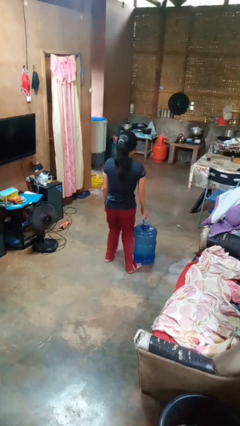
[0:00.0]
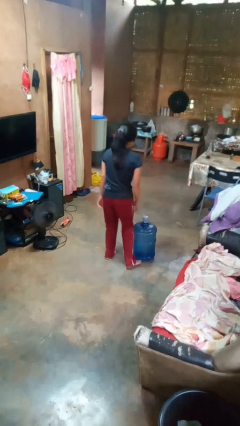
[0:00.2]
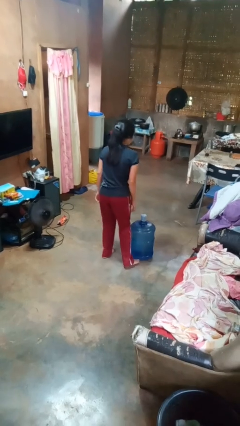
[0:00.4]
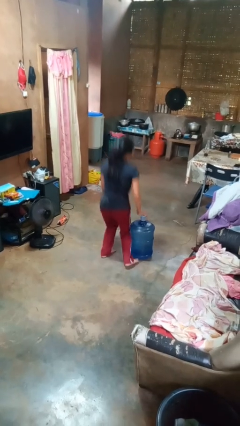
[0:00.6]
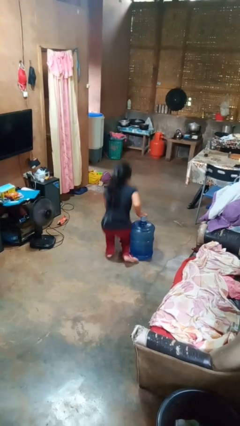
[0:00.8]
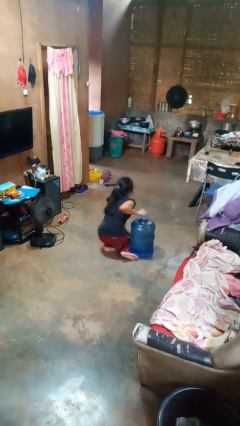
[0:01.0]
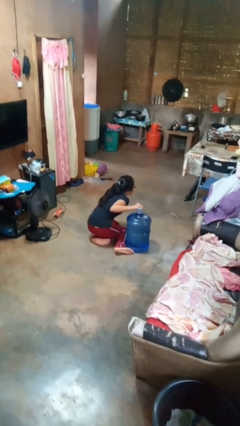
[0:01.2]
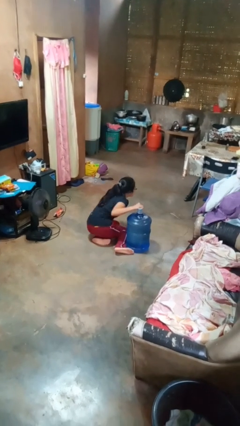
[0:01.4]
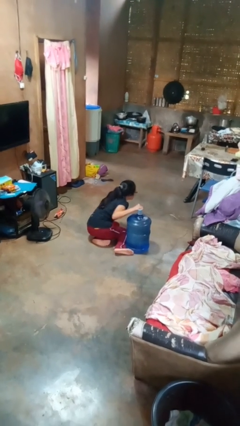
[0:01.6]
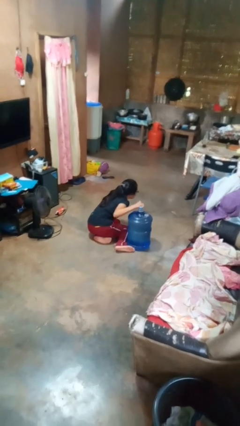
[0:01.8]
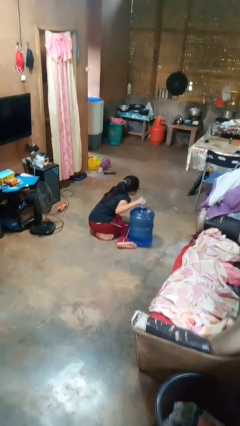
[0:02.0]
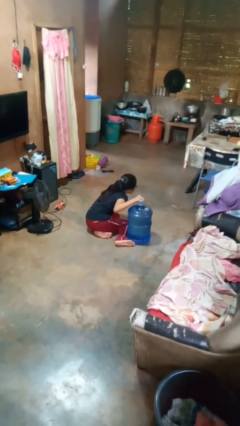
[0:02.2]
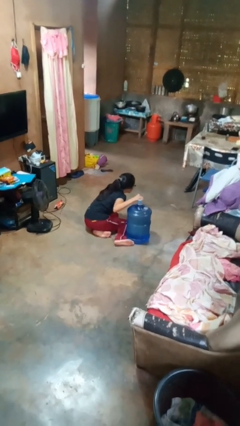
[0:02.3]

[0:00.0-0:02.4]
person trips on object on floor

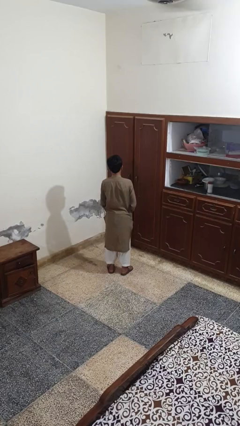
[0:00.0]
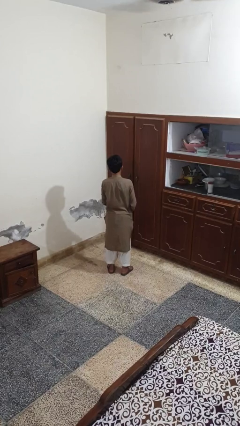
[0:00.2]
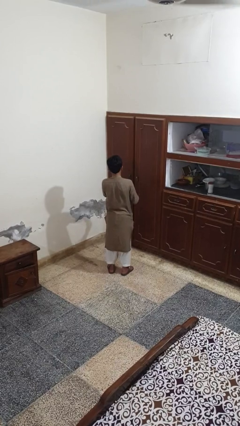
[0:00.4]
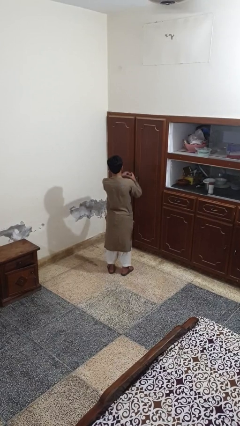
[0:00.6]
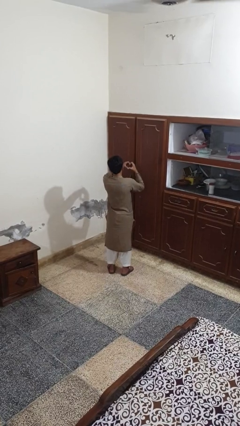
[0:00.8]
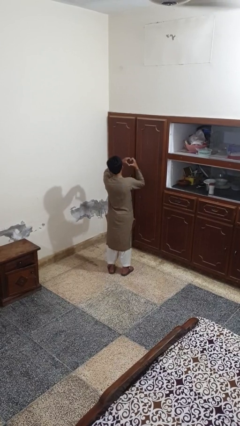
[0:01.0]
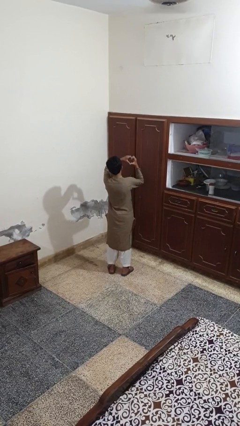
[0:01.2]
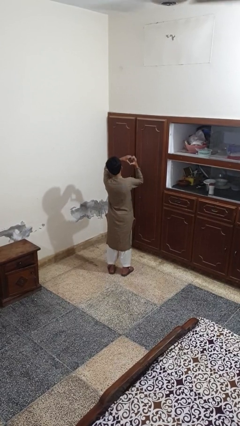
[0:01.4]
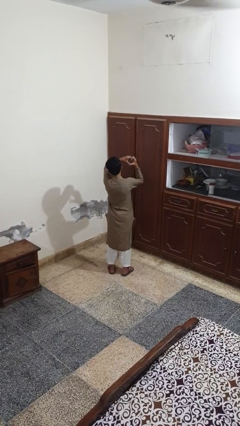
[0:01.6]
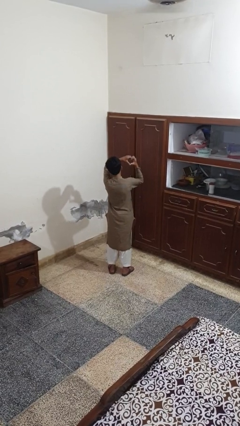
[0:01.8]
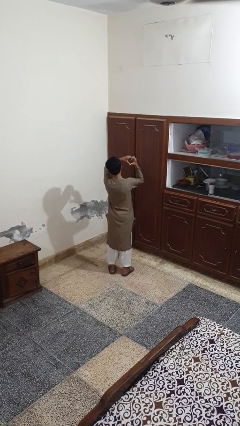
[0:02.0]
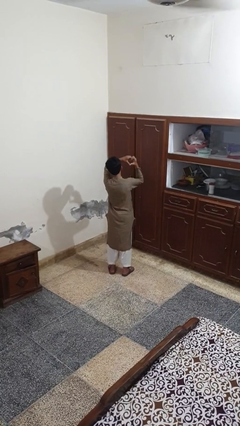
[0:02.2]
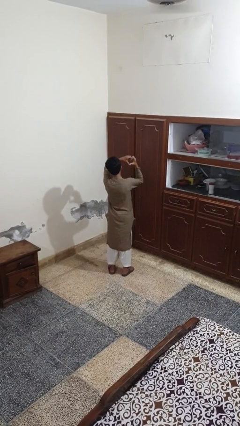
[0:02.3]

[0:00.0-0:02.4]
person gestures heart

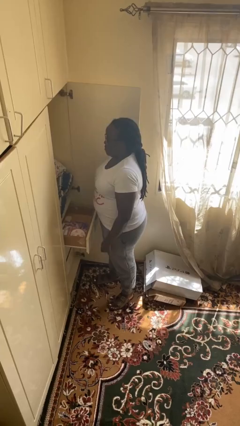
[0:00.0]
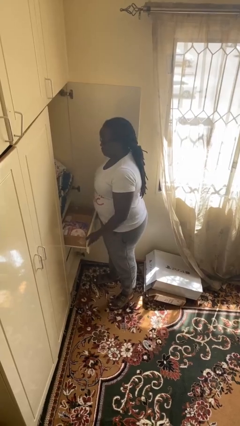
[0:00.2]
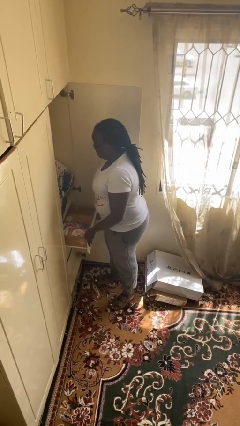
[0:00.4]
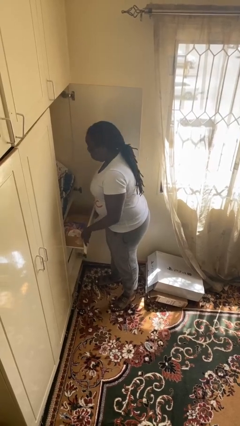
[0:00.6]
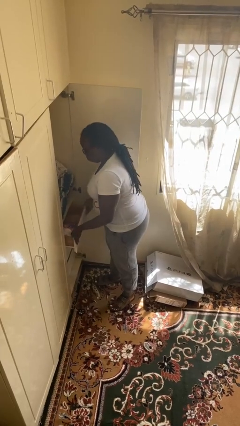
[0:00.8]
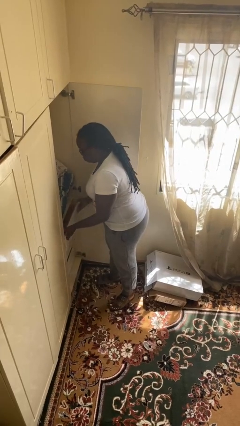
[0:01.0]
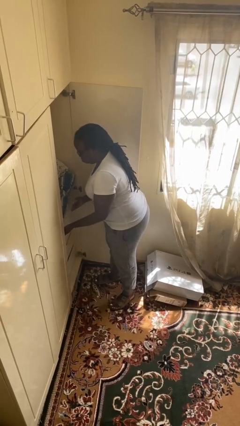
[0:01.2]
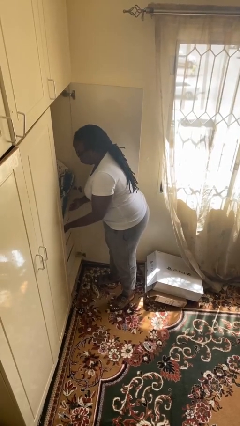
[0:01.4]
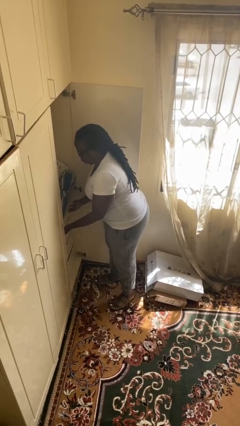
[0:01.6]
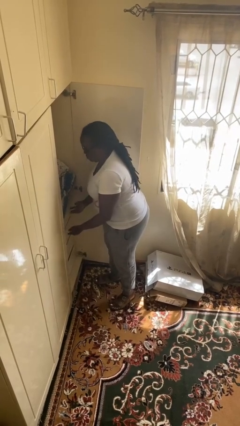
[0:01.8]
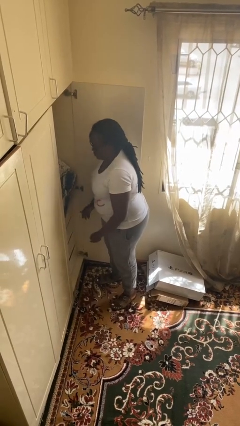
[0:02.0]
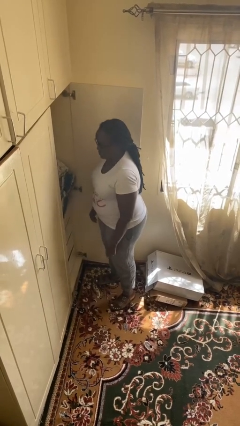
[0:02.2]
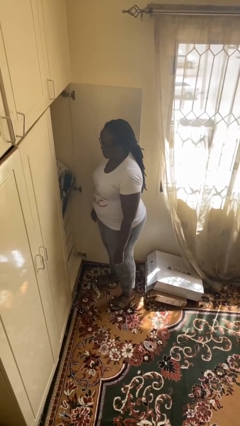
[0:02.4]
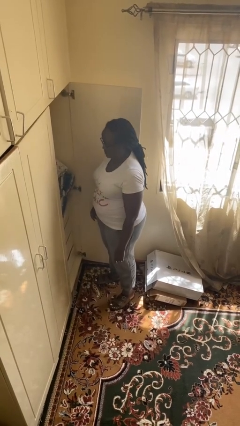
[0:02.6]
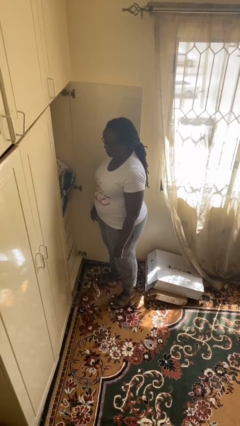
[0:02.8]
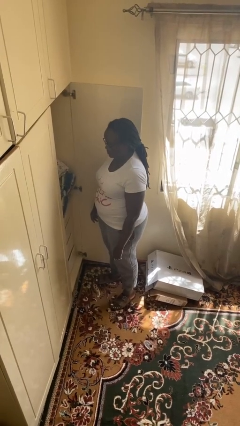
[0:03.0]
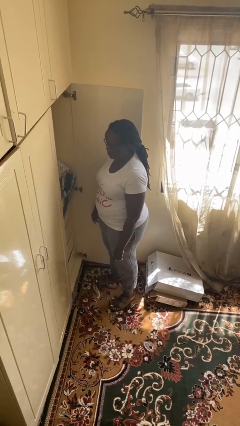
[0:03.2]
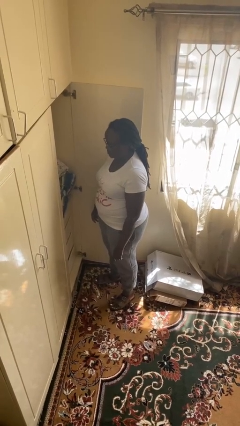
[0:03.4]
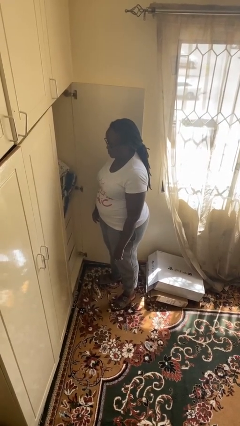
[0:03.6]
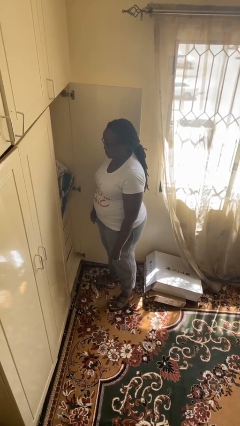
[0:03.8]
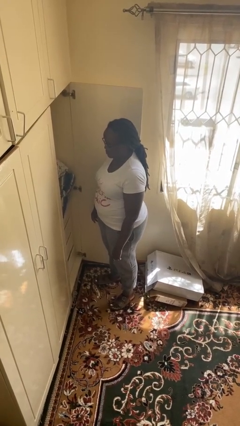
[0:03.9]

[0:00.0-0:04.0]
person closes dresser drawer

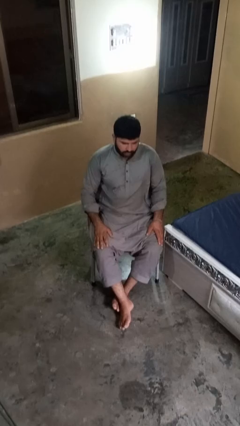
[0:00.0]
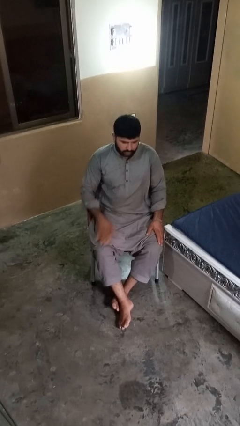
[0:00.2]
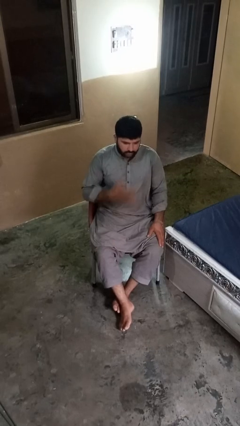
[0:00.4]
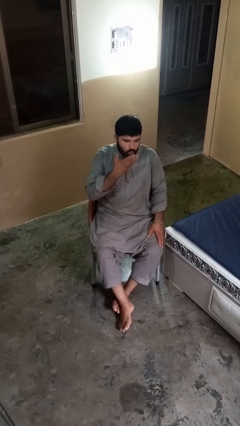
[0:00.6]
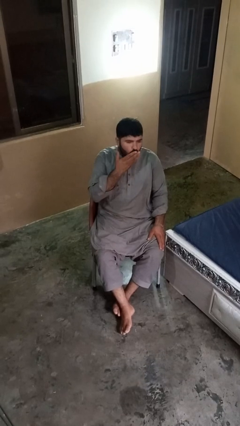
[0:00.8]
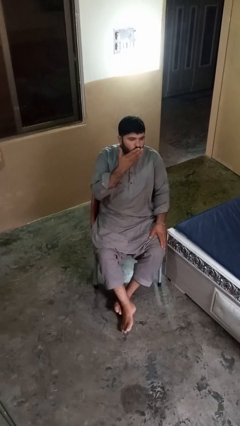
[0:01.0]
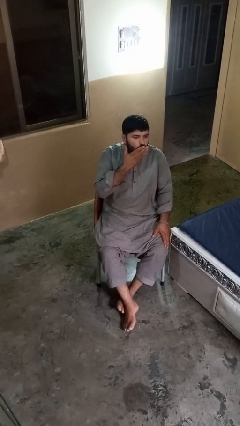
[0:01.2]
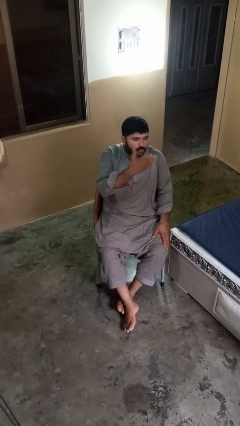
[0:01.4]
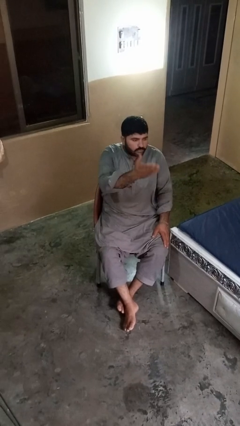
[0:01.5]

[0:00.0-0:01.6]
person gestures blow kiss

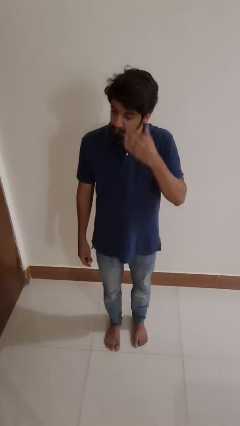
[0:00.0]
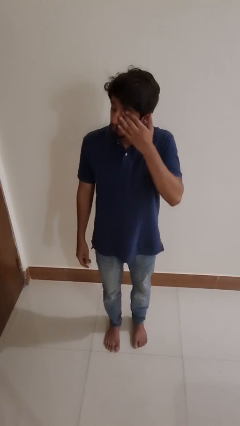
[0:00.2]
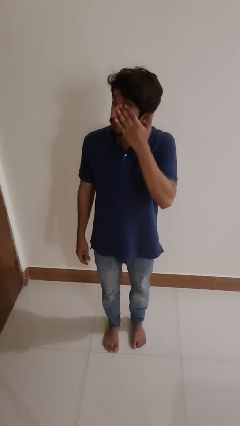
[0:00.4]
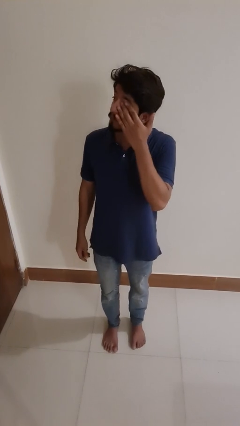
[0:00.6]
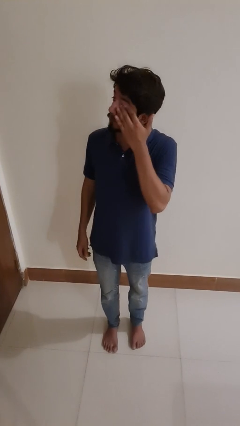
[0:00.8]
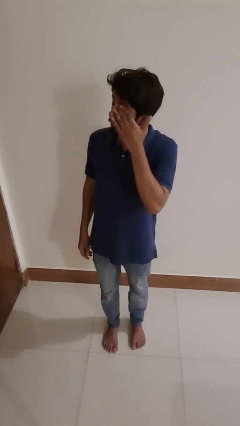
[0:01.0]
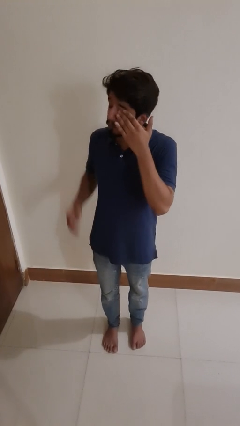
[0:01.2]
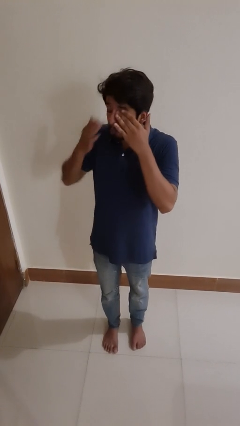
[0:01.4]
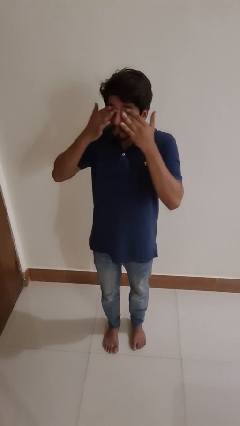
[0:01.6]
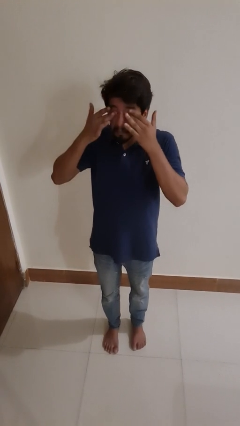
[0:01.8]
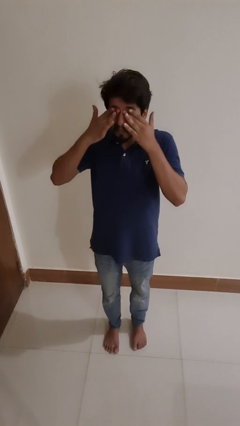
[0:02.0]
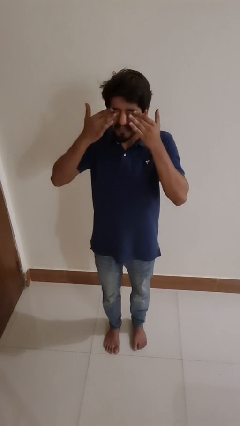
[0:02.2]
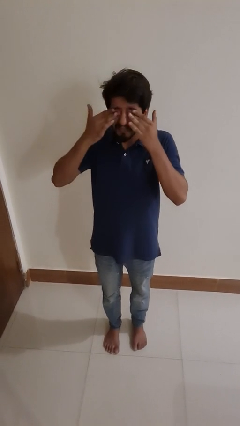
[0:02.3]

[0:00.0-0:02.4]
person rubs eyes

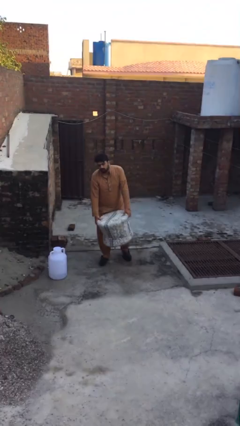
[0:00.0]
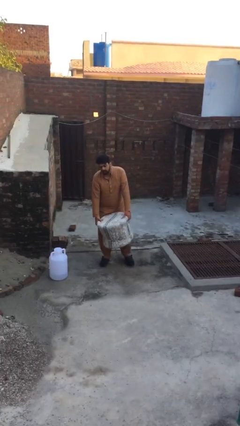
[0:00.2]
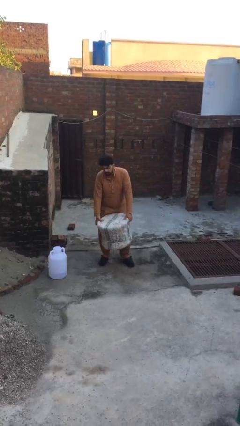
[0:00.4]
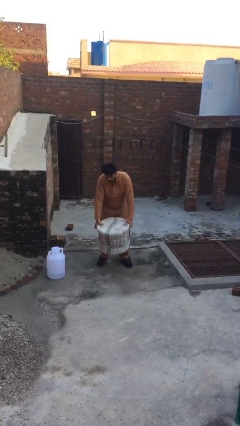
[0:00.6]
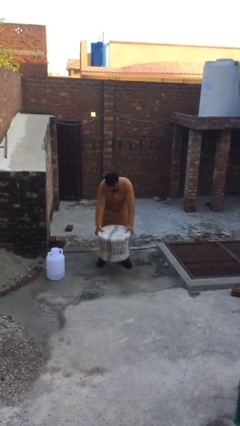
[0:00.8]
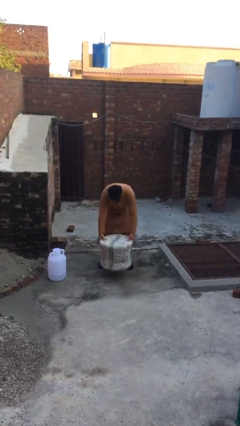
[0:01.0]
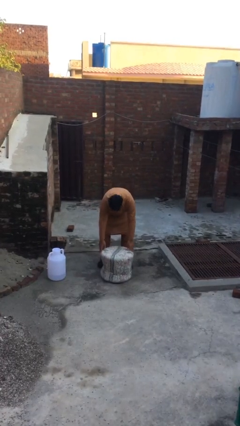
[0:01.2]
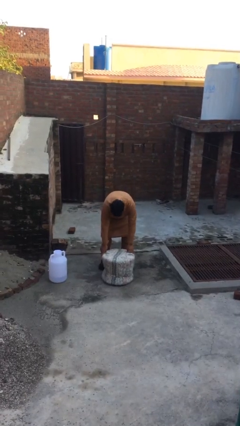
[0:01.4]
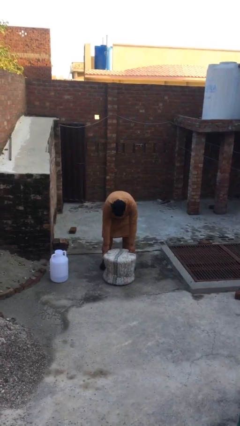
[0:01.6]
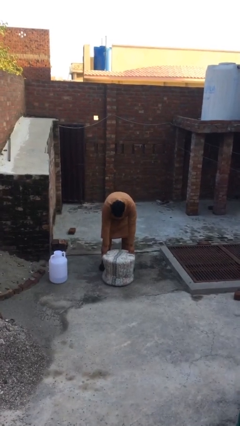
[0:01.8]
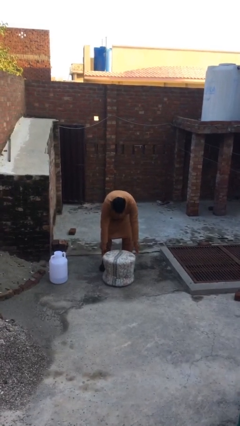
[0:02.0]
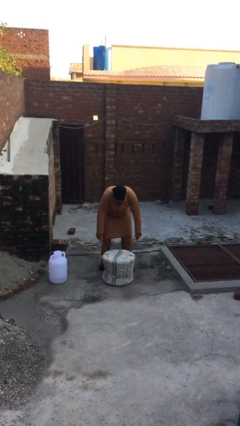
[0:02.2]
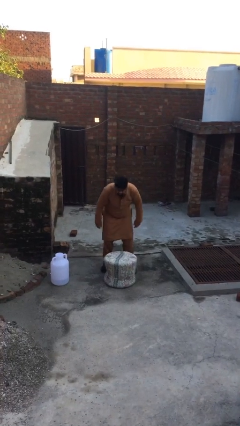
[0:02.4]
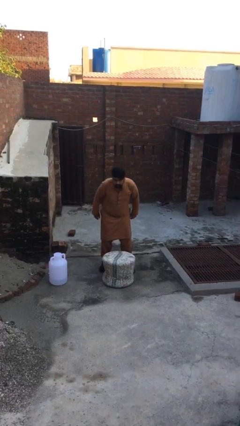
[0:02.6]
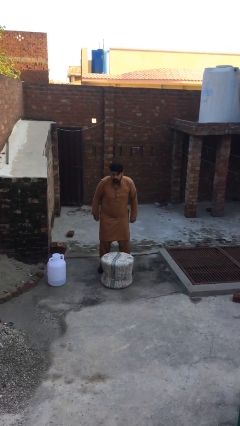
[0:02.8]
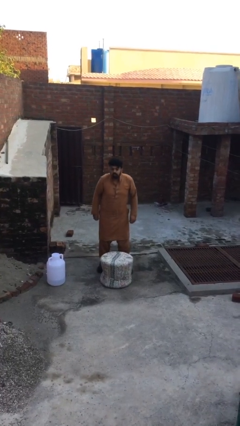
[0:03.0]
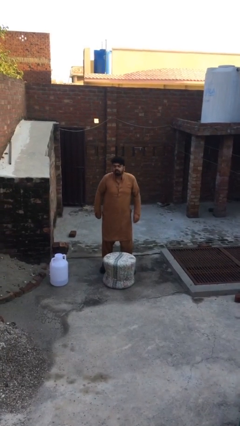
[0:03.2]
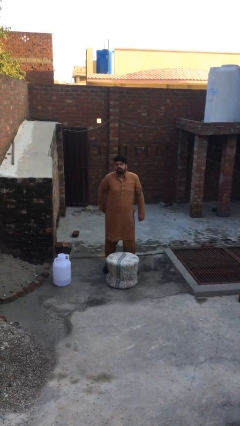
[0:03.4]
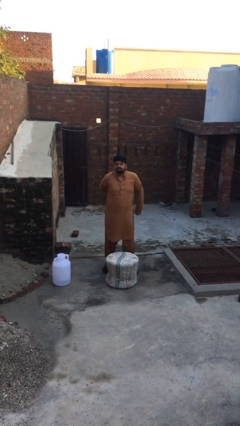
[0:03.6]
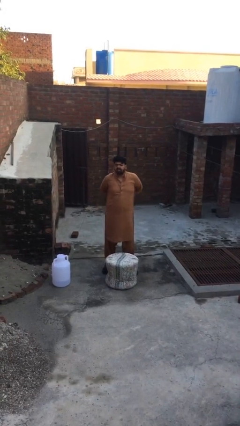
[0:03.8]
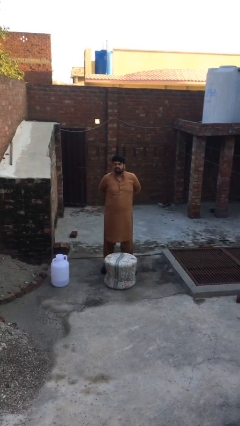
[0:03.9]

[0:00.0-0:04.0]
person puts down object on floor

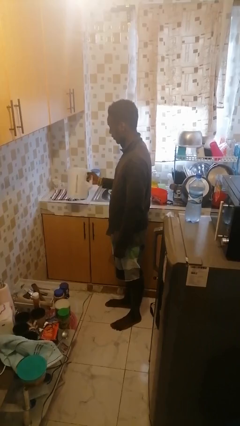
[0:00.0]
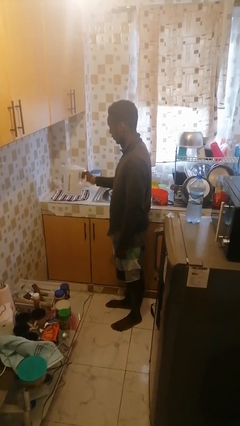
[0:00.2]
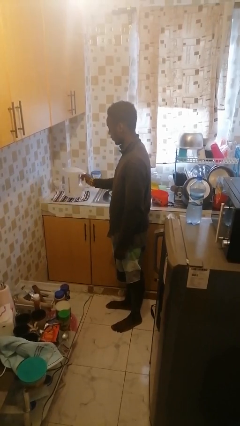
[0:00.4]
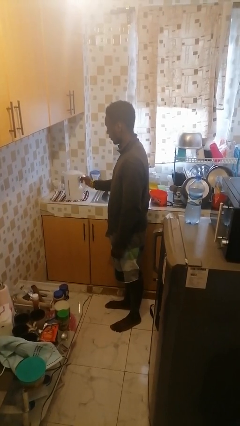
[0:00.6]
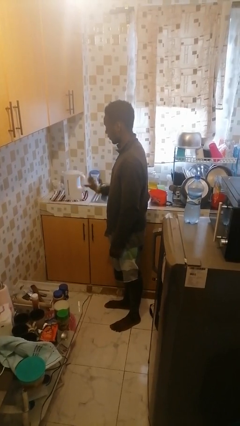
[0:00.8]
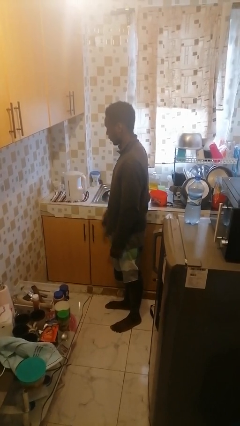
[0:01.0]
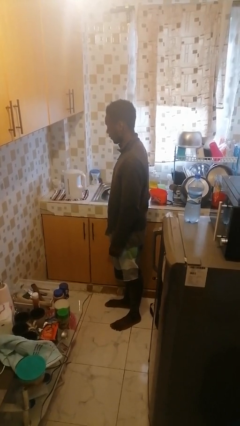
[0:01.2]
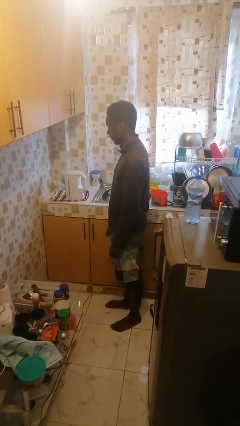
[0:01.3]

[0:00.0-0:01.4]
person puts down object on countertop
